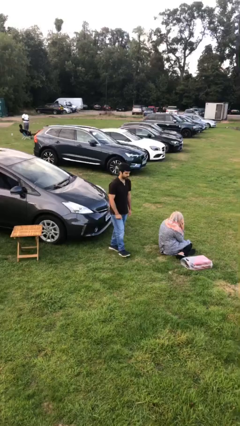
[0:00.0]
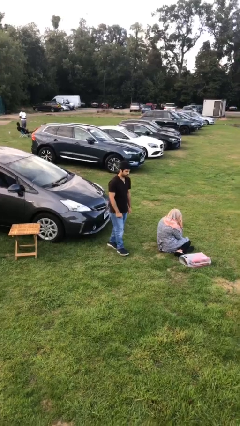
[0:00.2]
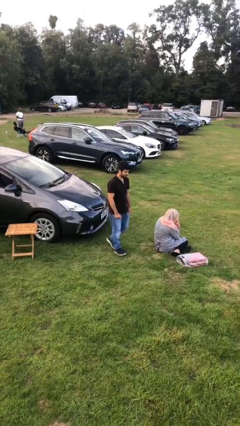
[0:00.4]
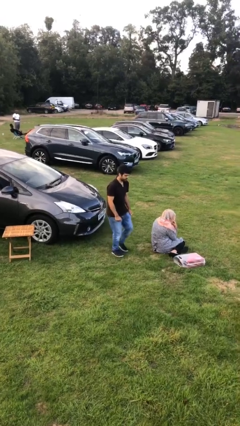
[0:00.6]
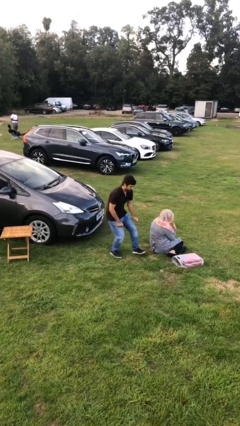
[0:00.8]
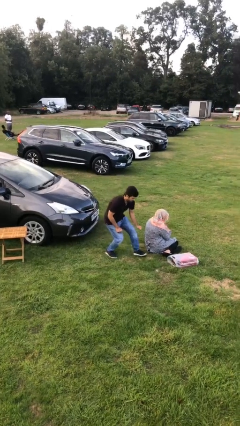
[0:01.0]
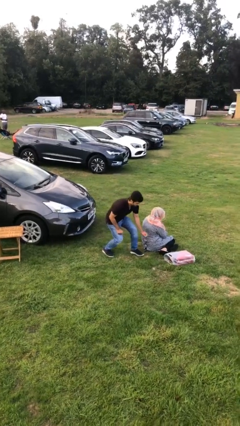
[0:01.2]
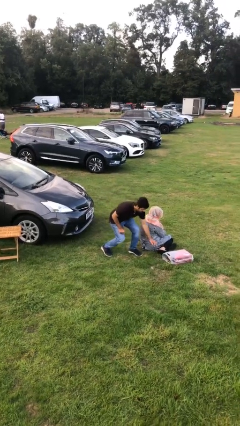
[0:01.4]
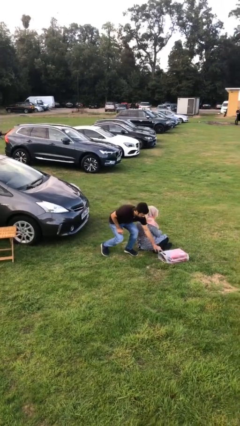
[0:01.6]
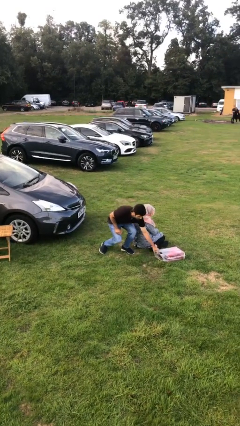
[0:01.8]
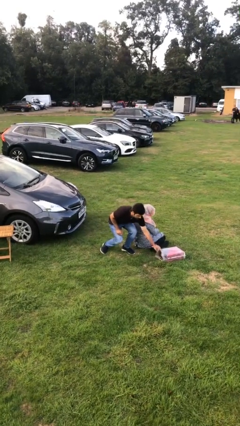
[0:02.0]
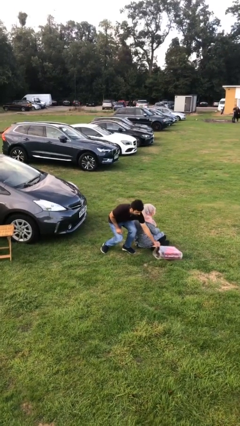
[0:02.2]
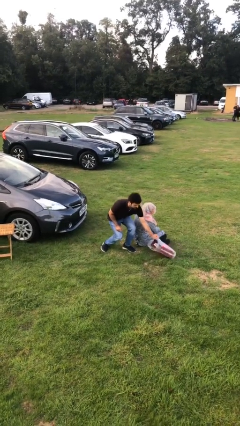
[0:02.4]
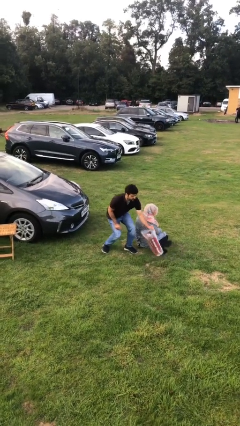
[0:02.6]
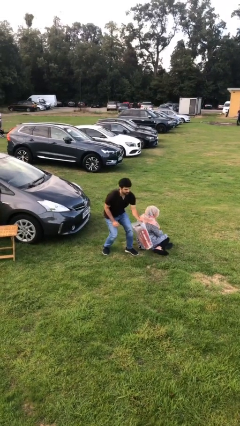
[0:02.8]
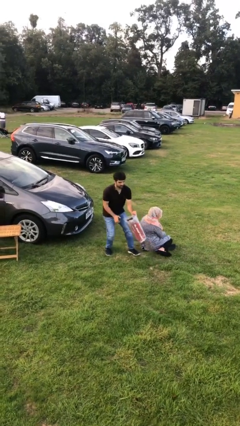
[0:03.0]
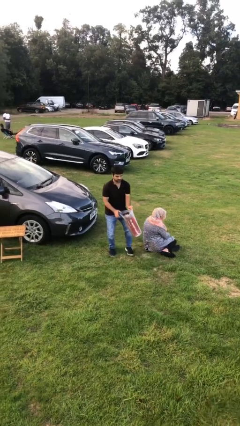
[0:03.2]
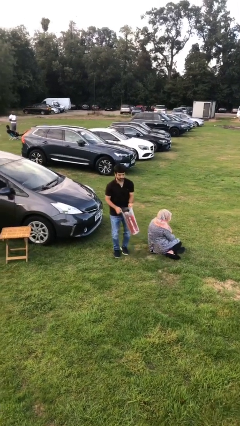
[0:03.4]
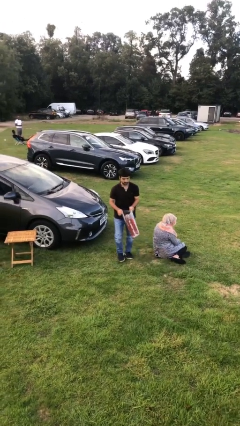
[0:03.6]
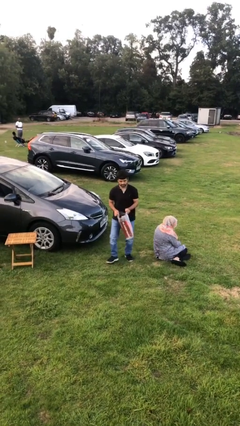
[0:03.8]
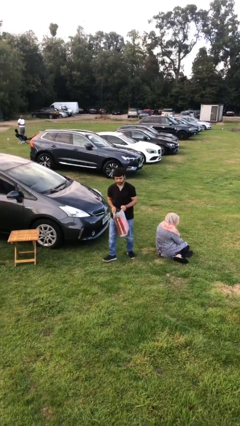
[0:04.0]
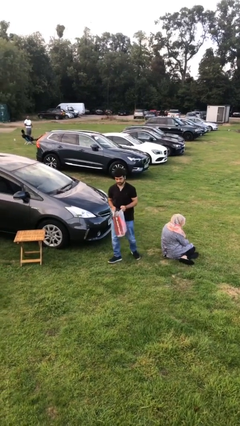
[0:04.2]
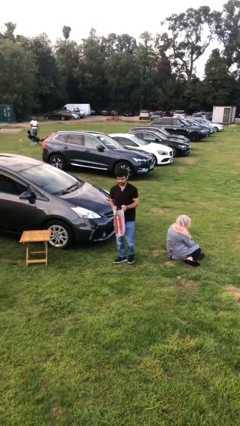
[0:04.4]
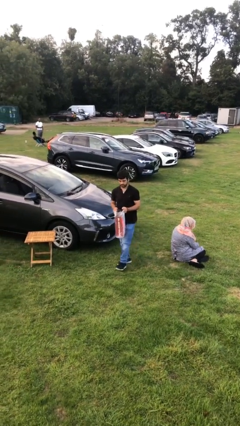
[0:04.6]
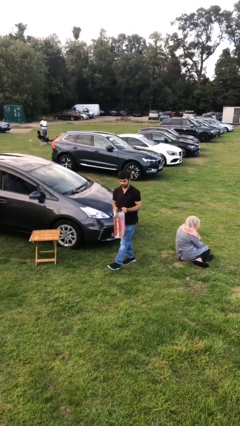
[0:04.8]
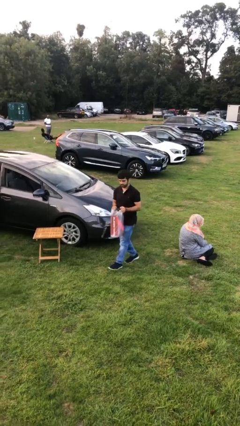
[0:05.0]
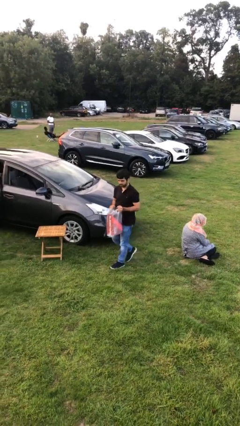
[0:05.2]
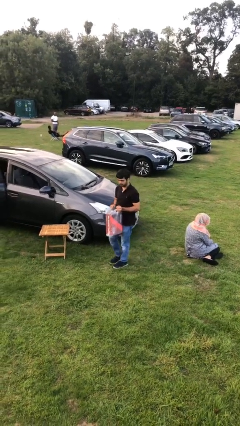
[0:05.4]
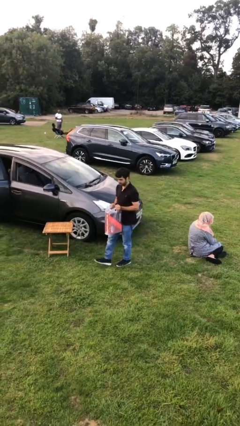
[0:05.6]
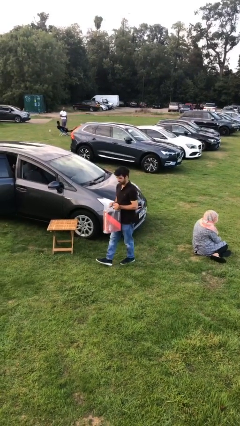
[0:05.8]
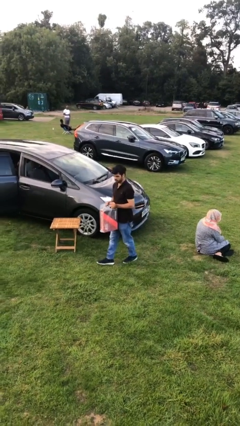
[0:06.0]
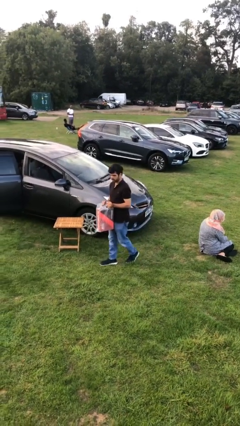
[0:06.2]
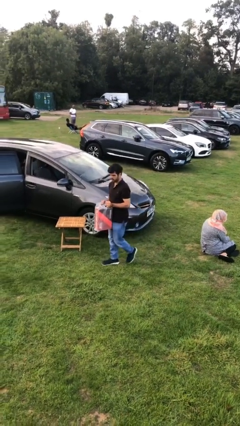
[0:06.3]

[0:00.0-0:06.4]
person steals object from person

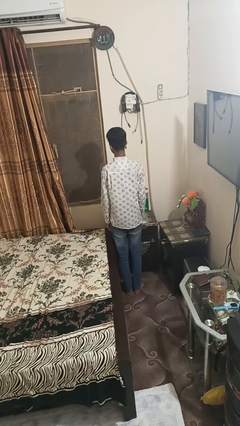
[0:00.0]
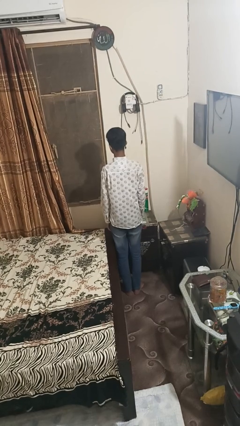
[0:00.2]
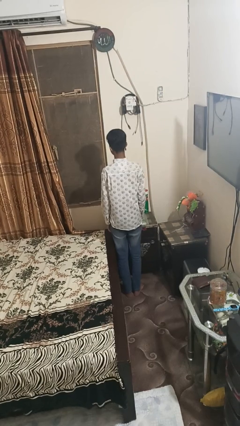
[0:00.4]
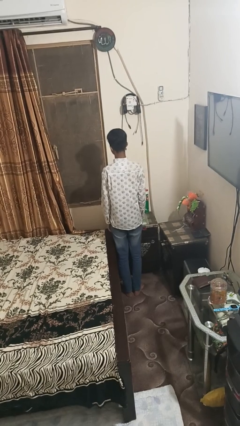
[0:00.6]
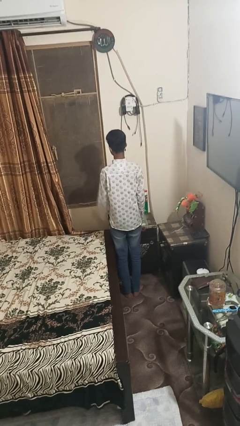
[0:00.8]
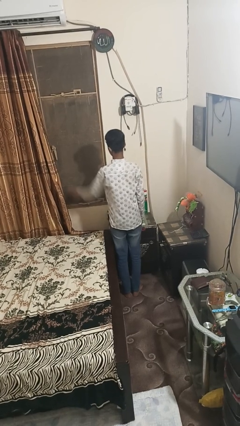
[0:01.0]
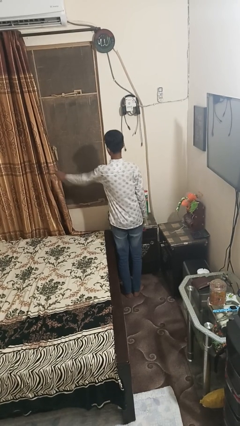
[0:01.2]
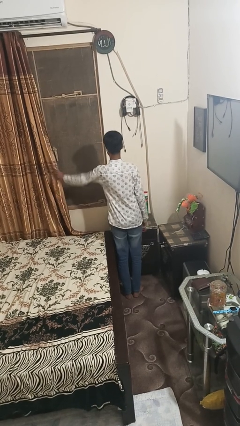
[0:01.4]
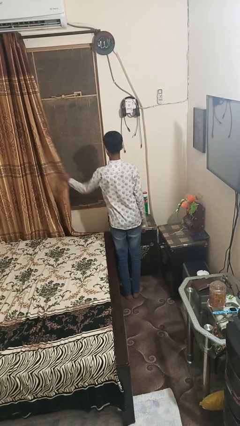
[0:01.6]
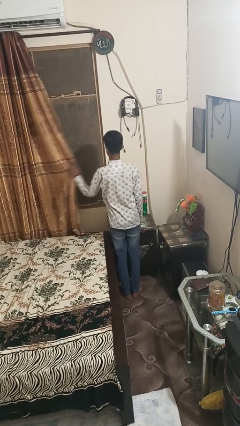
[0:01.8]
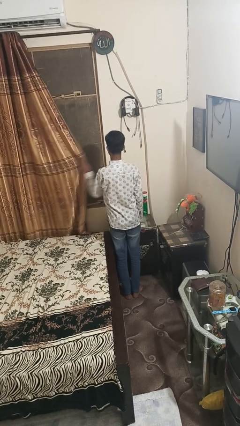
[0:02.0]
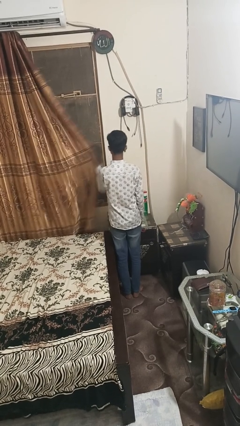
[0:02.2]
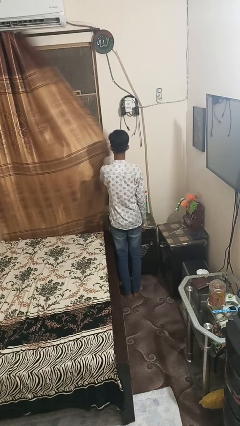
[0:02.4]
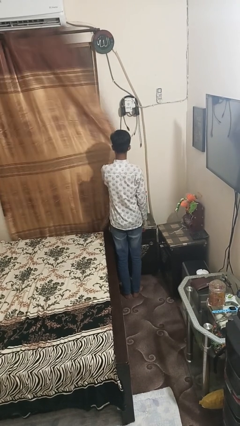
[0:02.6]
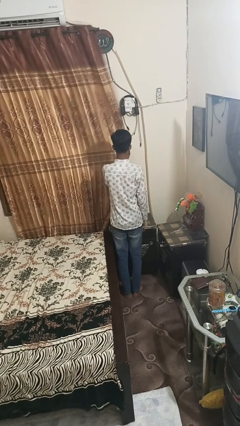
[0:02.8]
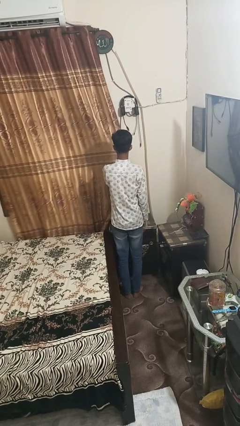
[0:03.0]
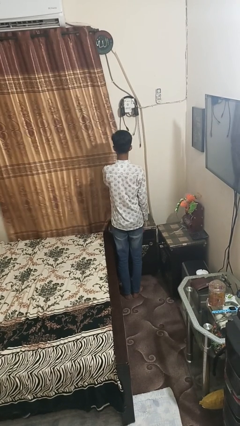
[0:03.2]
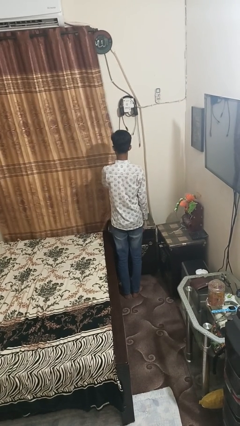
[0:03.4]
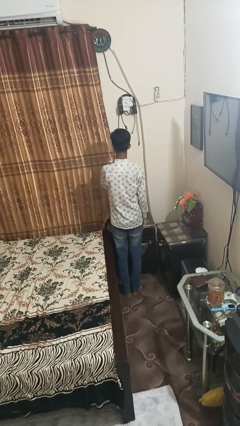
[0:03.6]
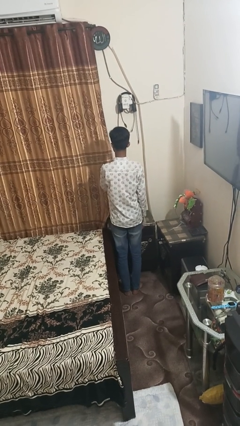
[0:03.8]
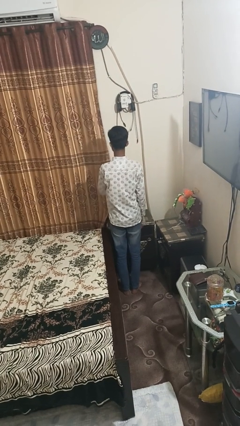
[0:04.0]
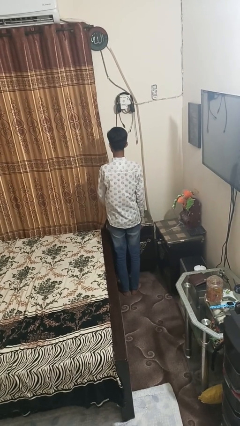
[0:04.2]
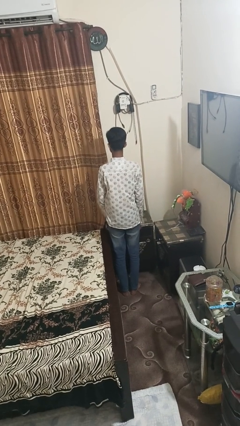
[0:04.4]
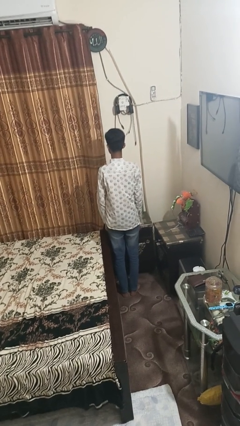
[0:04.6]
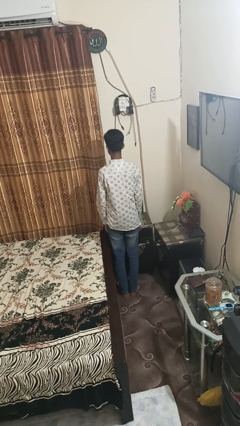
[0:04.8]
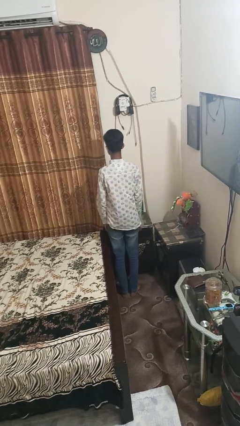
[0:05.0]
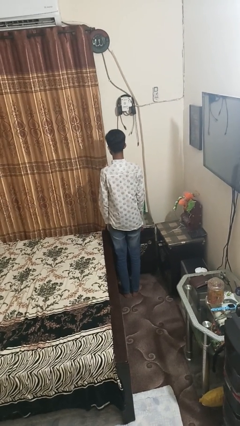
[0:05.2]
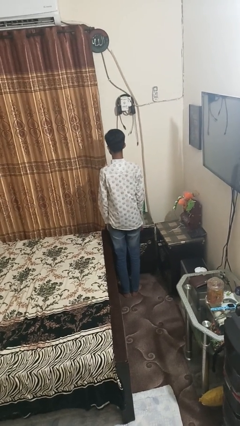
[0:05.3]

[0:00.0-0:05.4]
person closes curtains

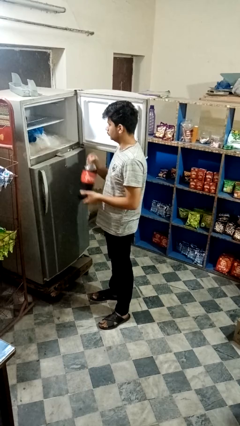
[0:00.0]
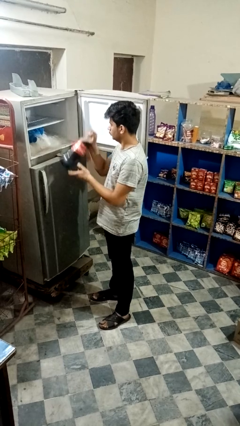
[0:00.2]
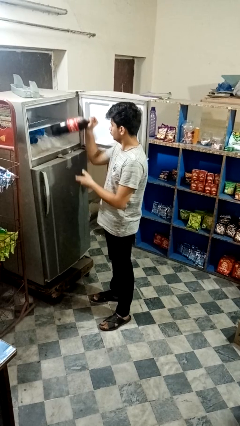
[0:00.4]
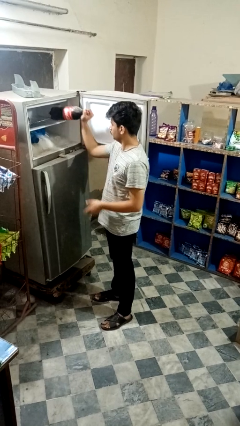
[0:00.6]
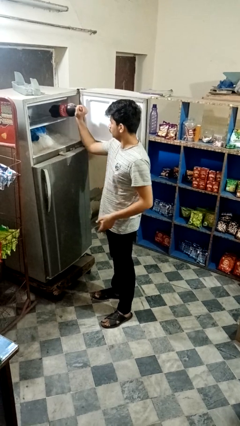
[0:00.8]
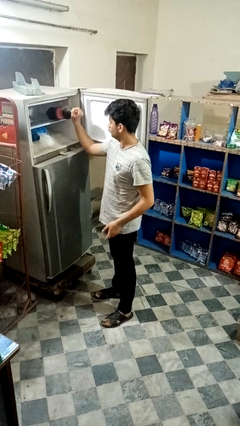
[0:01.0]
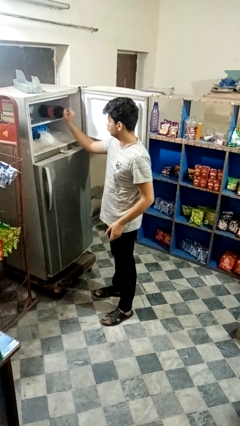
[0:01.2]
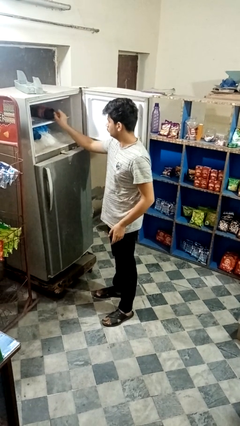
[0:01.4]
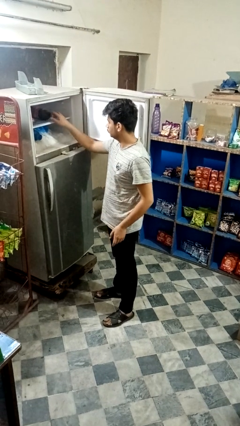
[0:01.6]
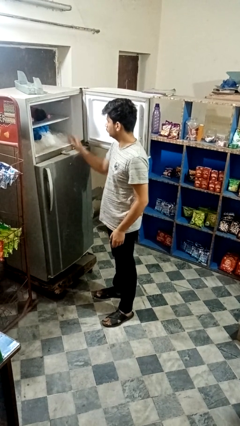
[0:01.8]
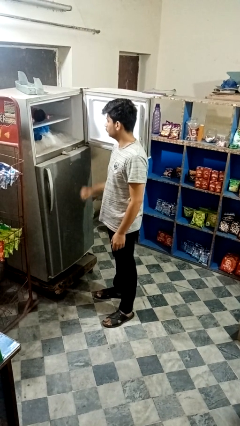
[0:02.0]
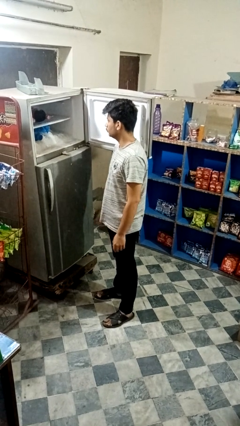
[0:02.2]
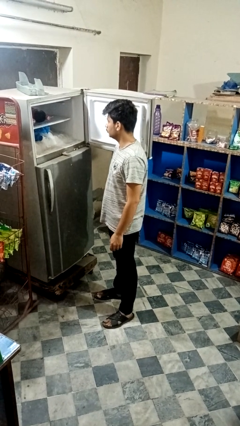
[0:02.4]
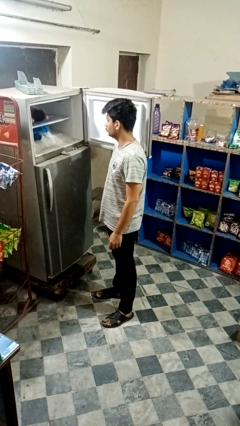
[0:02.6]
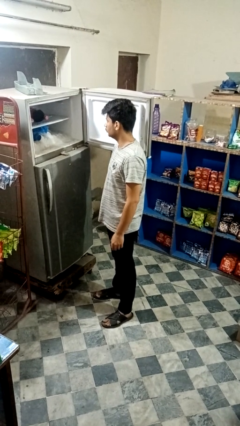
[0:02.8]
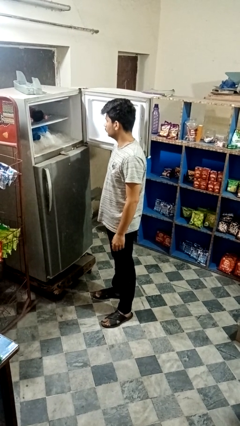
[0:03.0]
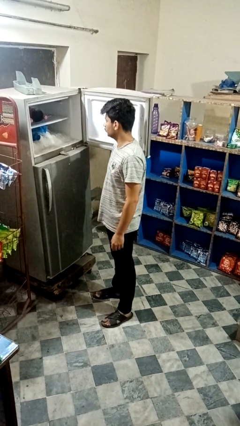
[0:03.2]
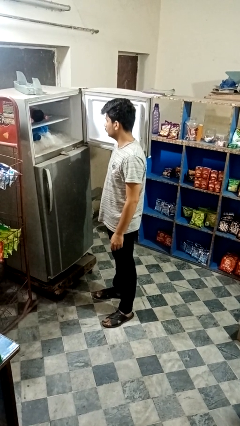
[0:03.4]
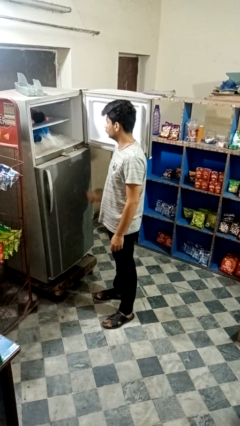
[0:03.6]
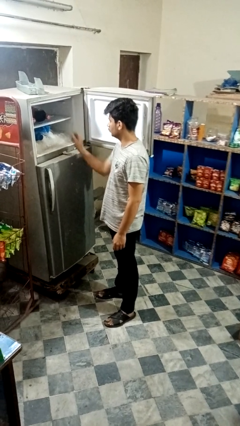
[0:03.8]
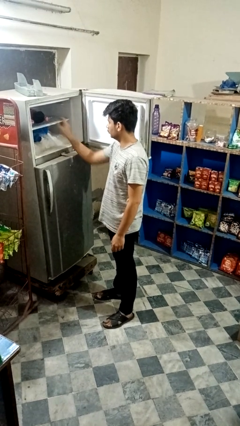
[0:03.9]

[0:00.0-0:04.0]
person puts object into refrigerator

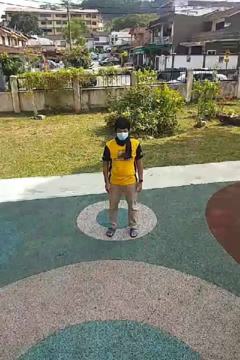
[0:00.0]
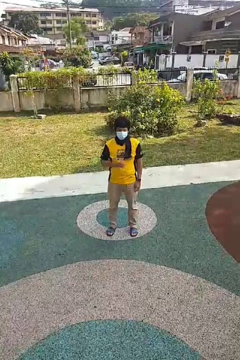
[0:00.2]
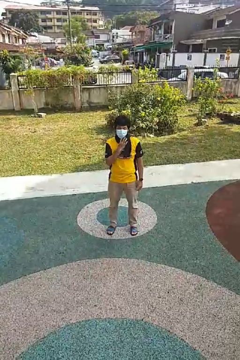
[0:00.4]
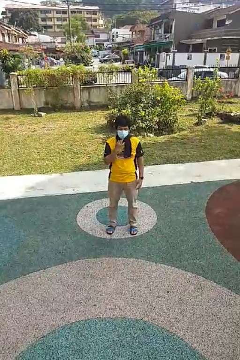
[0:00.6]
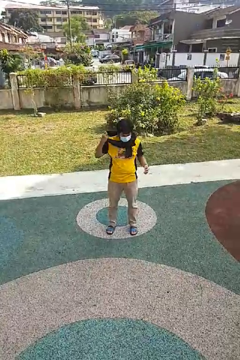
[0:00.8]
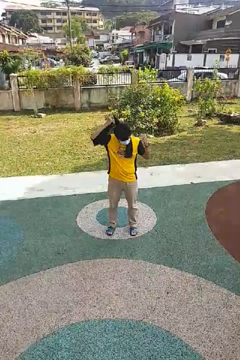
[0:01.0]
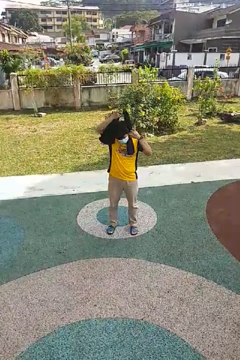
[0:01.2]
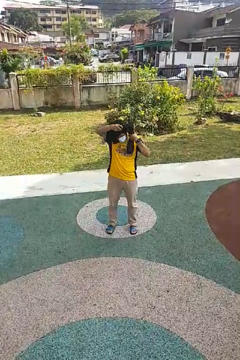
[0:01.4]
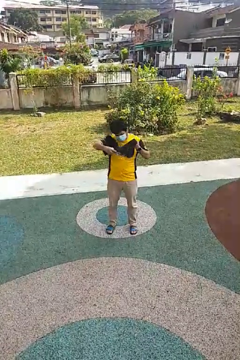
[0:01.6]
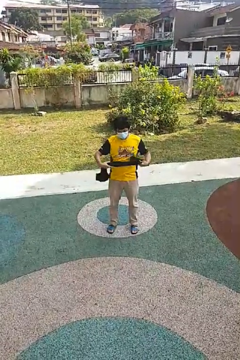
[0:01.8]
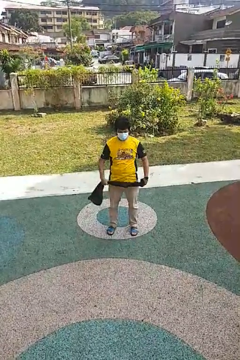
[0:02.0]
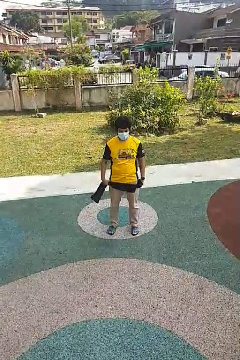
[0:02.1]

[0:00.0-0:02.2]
person takes off scarf
